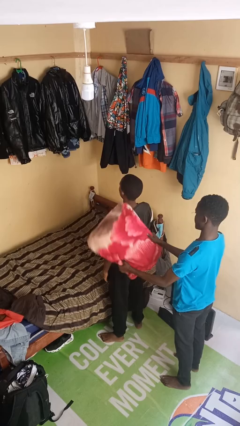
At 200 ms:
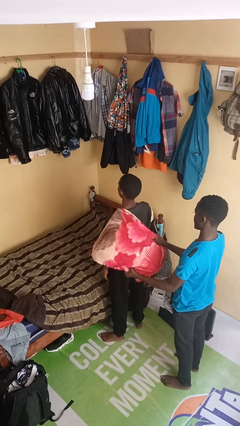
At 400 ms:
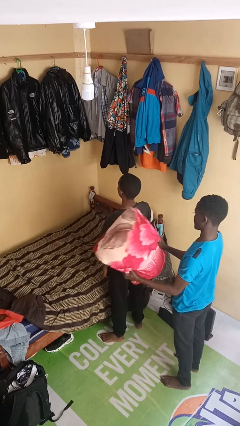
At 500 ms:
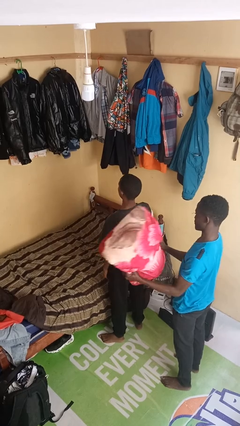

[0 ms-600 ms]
person hits person with pillow

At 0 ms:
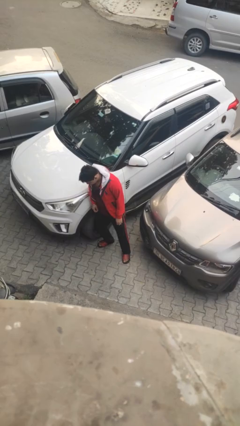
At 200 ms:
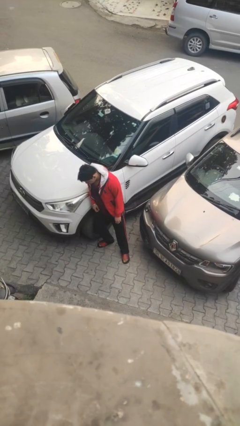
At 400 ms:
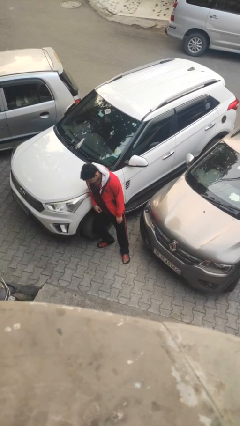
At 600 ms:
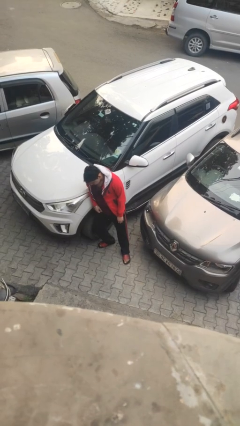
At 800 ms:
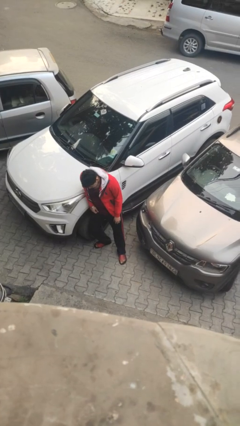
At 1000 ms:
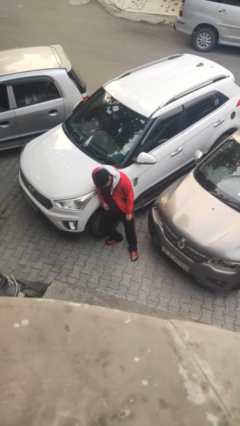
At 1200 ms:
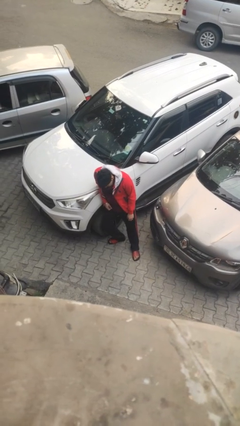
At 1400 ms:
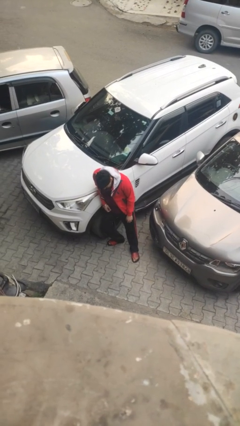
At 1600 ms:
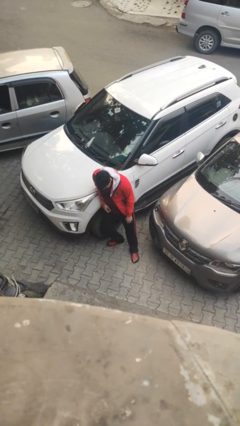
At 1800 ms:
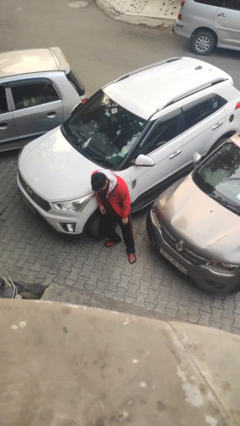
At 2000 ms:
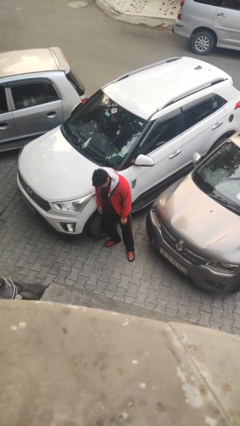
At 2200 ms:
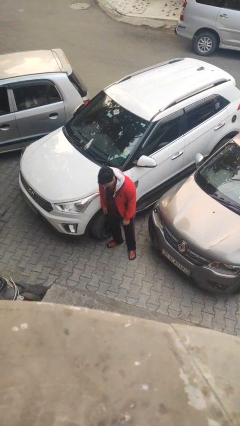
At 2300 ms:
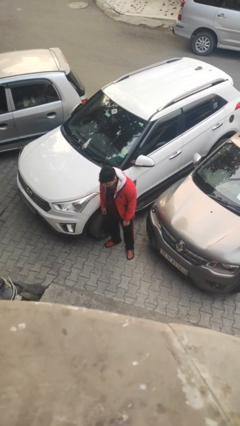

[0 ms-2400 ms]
person leans against car

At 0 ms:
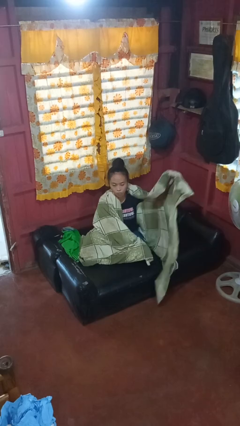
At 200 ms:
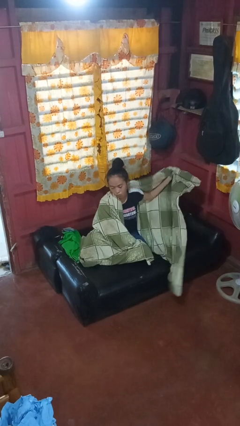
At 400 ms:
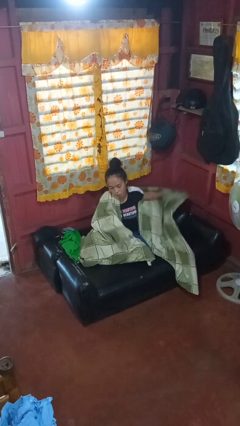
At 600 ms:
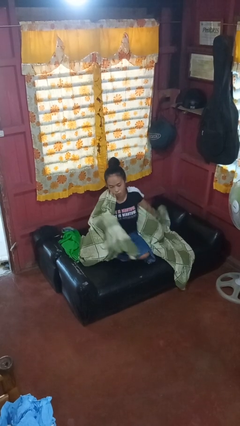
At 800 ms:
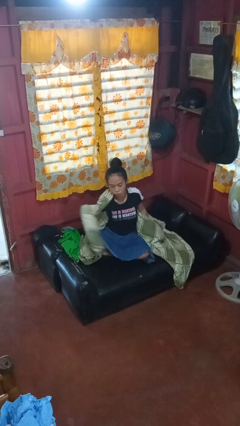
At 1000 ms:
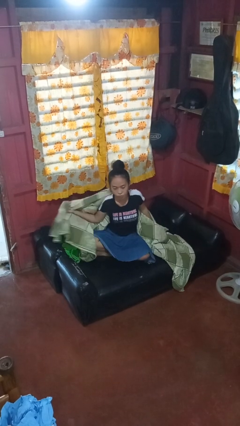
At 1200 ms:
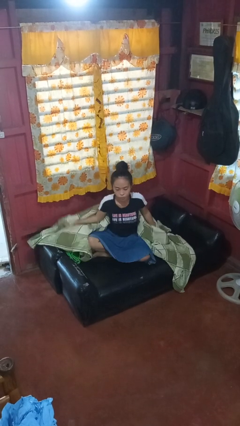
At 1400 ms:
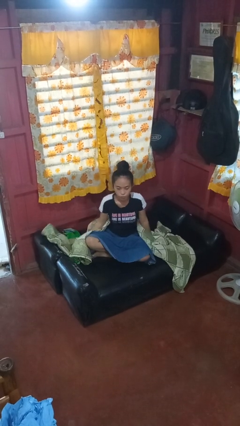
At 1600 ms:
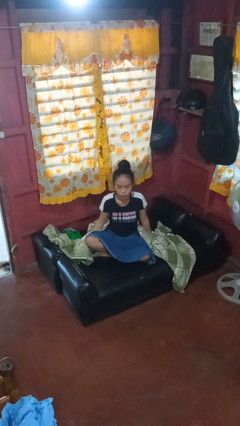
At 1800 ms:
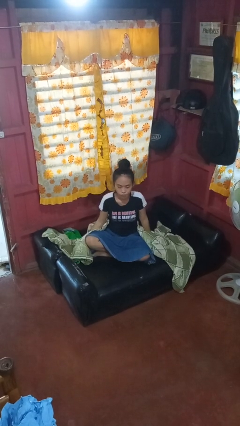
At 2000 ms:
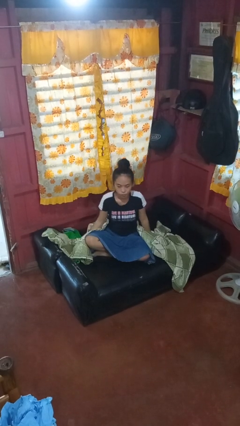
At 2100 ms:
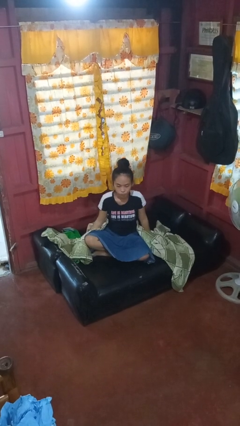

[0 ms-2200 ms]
person uncovers with blanket

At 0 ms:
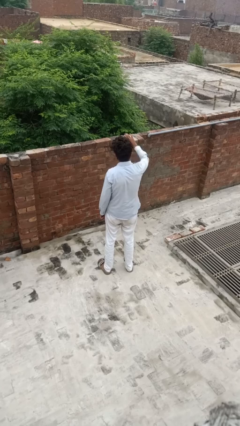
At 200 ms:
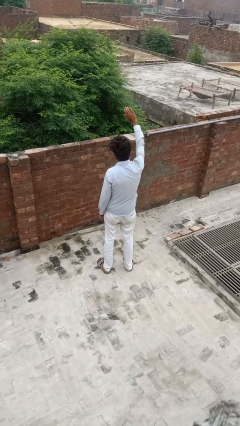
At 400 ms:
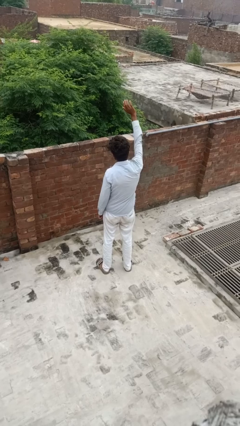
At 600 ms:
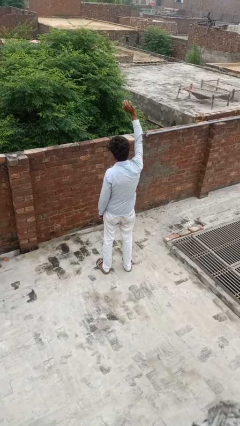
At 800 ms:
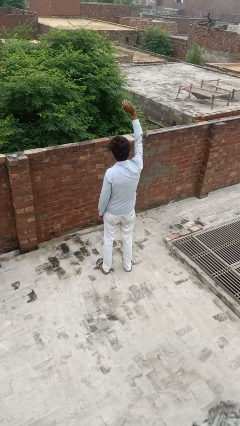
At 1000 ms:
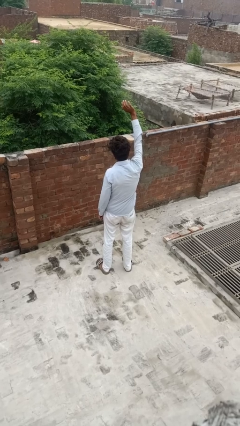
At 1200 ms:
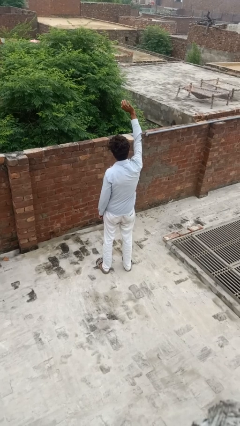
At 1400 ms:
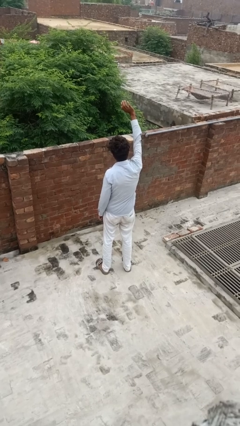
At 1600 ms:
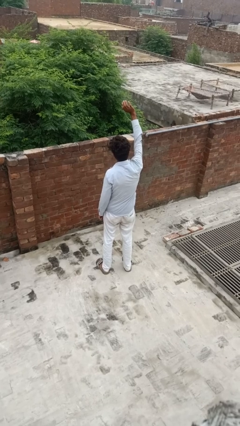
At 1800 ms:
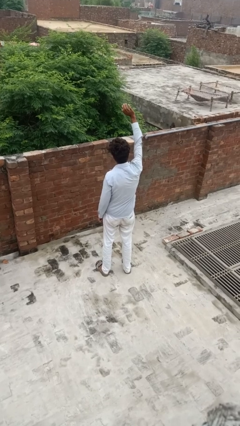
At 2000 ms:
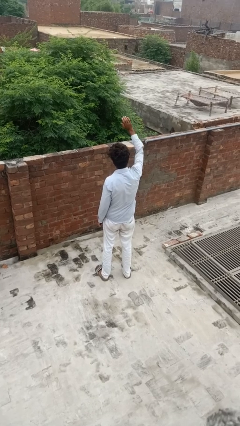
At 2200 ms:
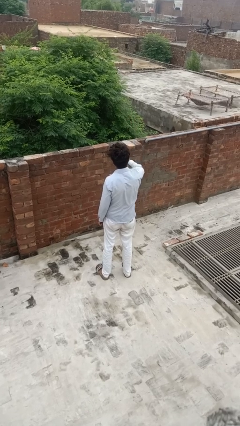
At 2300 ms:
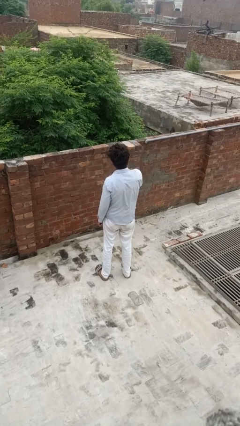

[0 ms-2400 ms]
person gestures raise hand

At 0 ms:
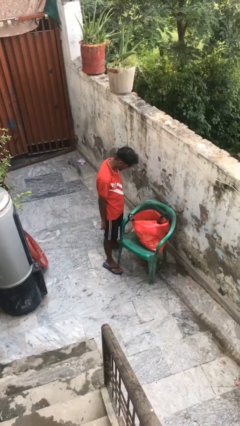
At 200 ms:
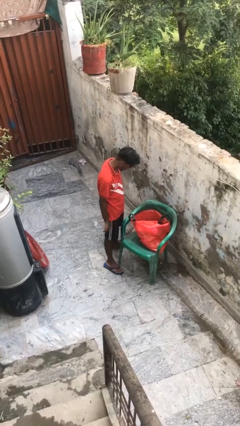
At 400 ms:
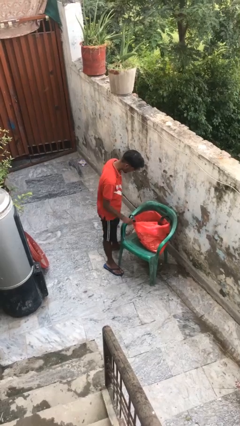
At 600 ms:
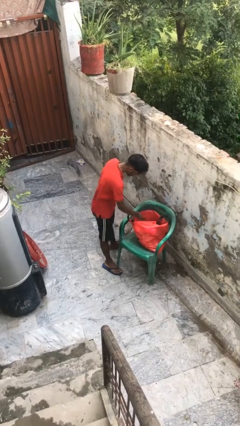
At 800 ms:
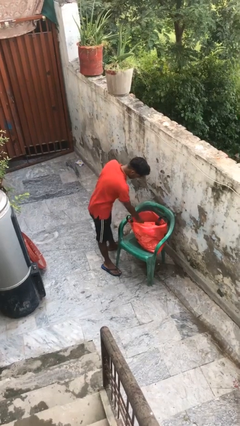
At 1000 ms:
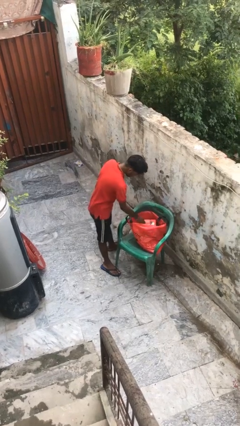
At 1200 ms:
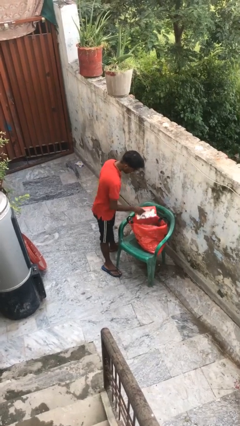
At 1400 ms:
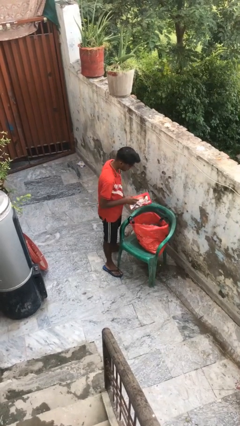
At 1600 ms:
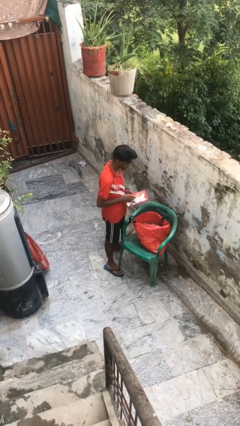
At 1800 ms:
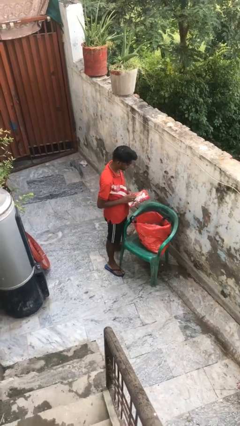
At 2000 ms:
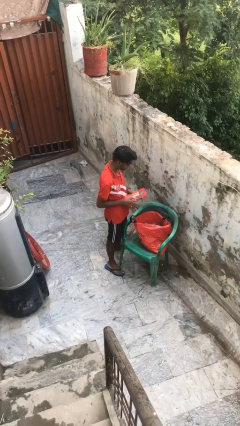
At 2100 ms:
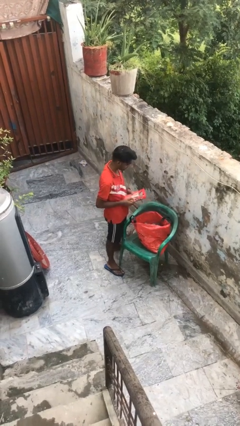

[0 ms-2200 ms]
person takes object from bag

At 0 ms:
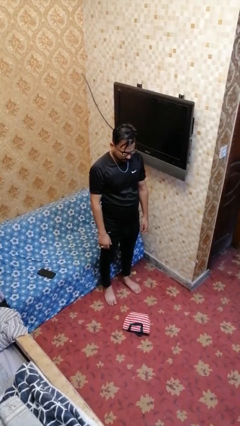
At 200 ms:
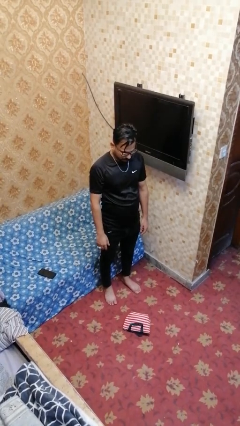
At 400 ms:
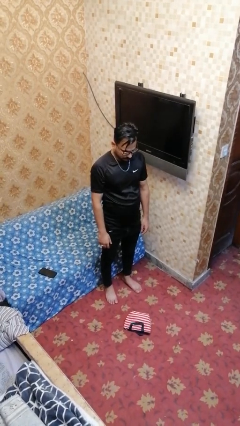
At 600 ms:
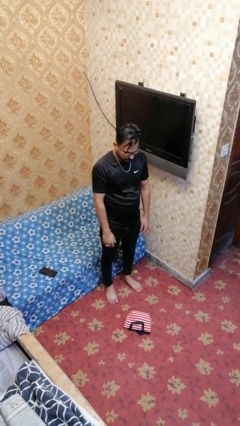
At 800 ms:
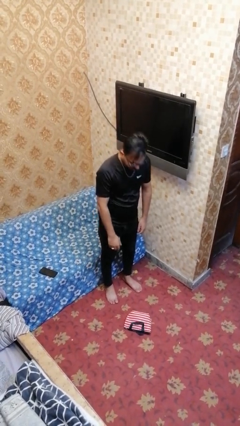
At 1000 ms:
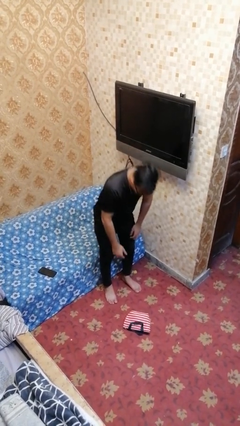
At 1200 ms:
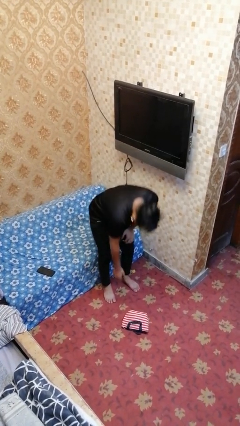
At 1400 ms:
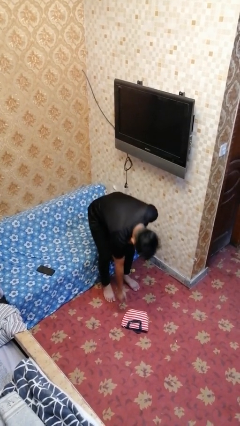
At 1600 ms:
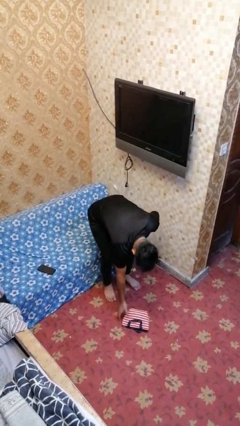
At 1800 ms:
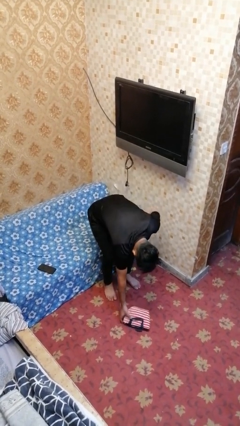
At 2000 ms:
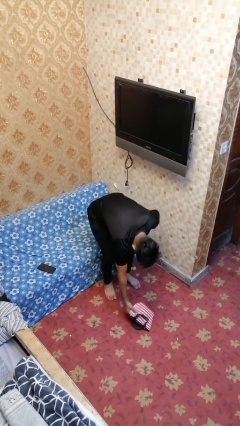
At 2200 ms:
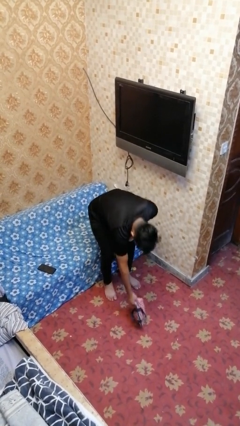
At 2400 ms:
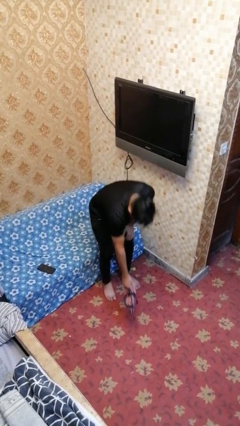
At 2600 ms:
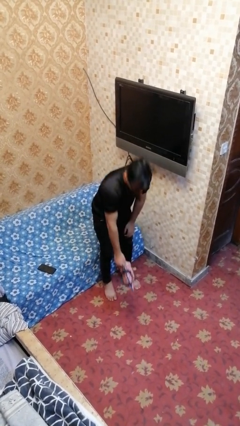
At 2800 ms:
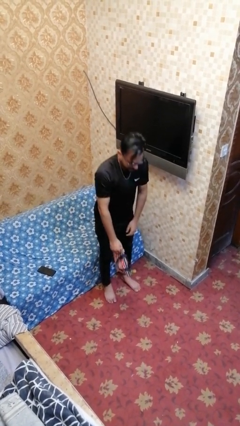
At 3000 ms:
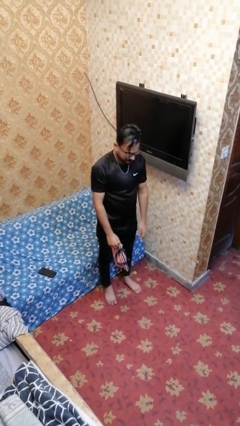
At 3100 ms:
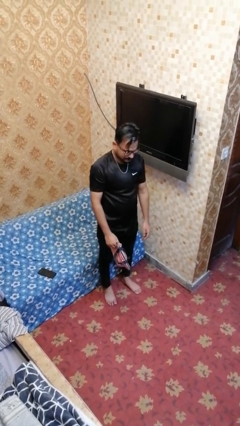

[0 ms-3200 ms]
person picks up object from floor

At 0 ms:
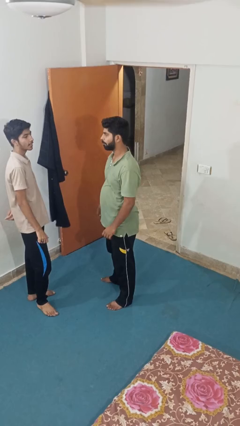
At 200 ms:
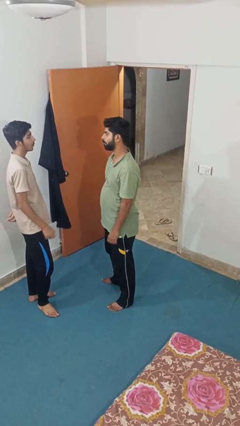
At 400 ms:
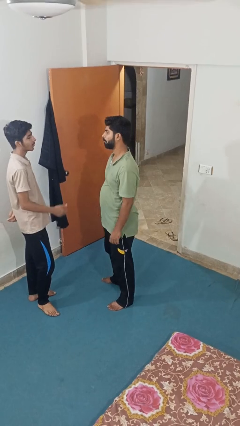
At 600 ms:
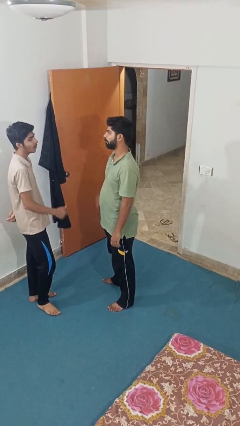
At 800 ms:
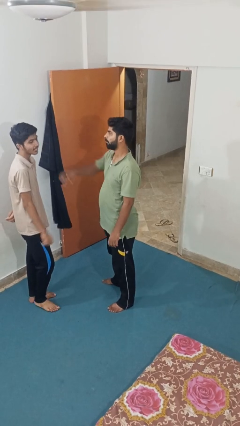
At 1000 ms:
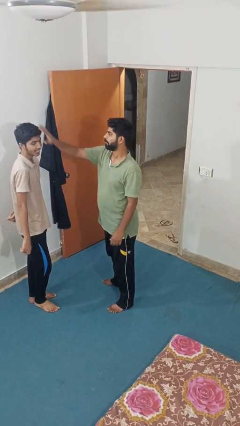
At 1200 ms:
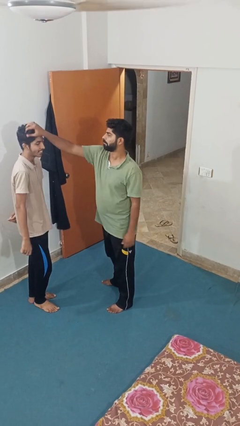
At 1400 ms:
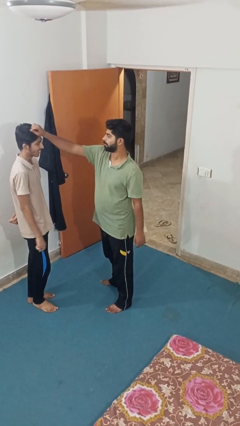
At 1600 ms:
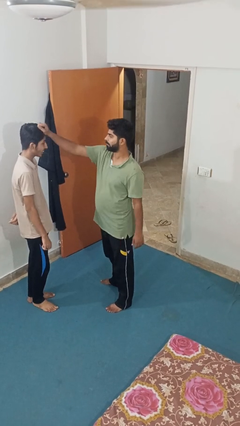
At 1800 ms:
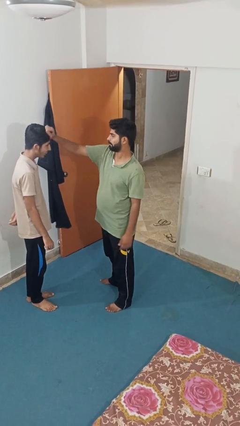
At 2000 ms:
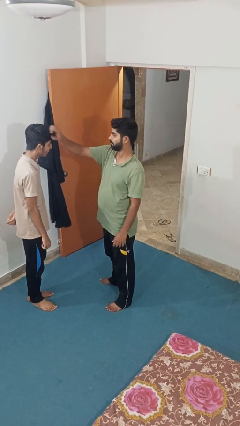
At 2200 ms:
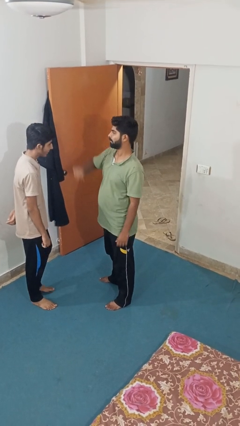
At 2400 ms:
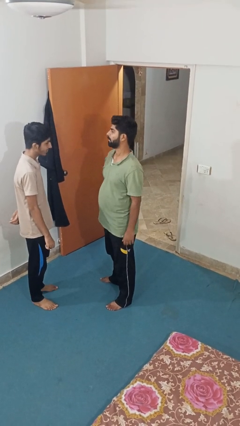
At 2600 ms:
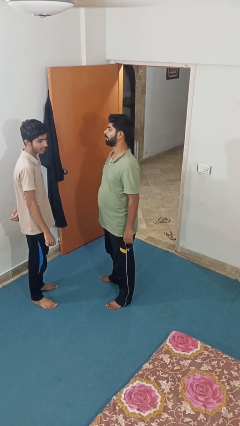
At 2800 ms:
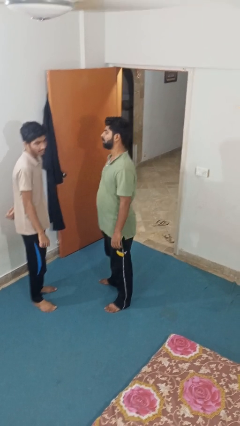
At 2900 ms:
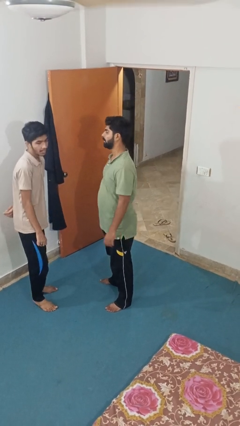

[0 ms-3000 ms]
person grabs person by hair

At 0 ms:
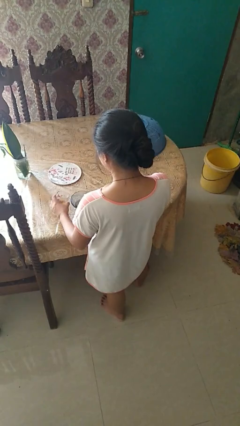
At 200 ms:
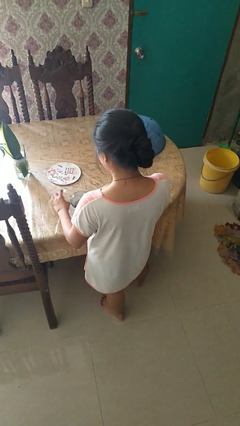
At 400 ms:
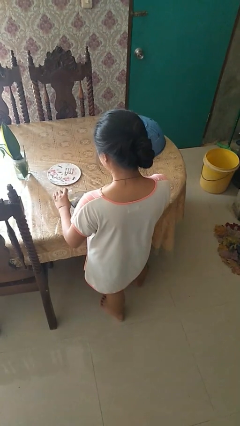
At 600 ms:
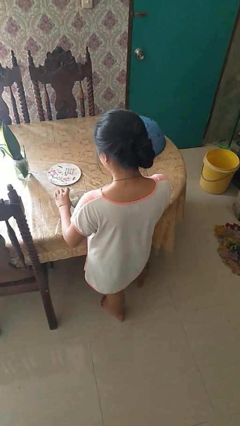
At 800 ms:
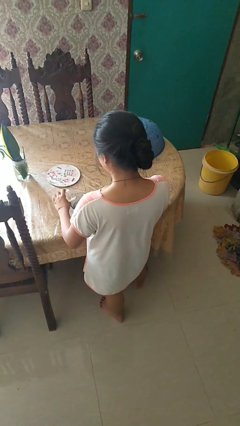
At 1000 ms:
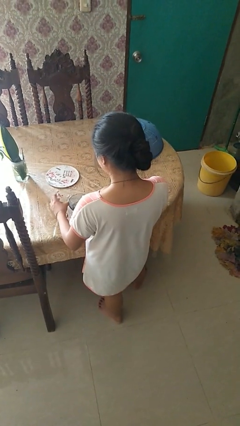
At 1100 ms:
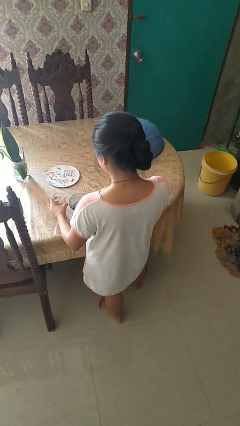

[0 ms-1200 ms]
person pours into bowl
